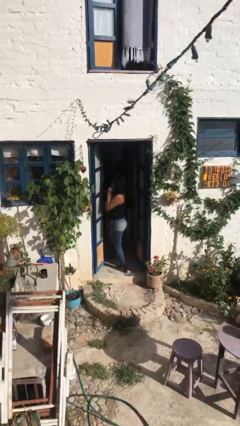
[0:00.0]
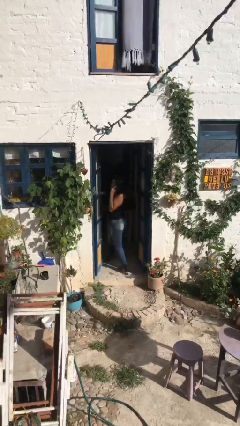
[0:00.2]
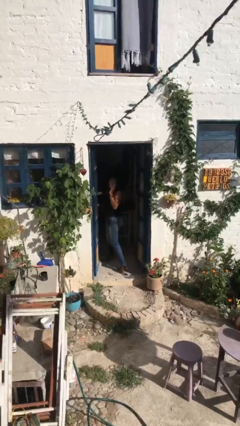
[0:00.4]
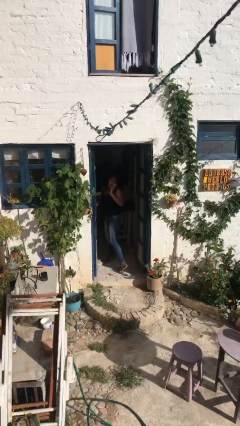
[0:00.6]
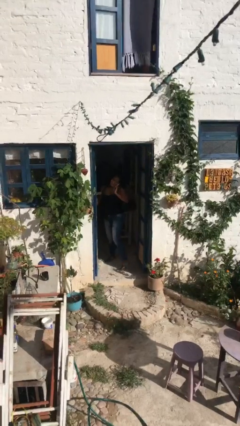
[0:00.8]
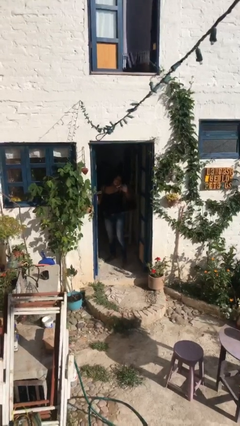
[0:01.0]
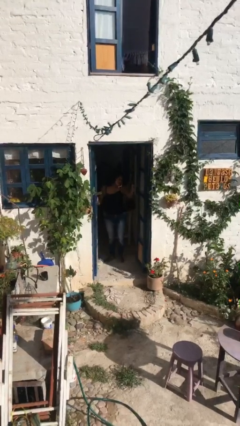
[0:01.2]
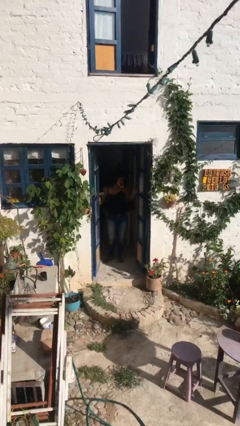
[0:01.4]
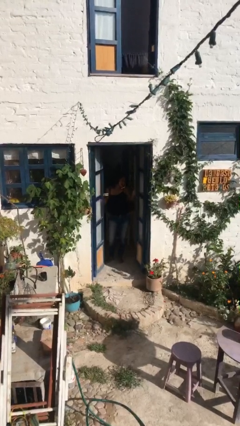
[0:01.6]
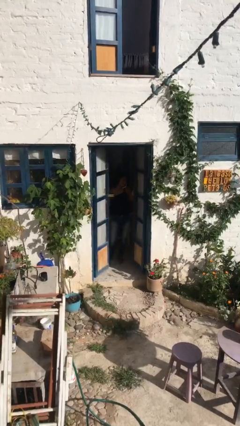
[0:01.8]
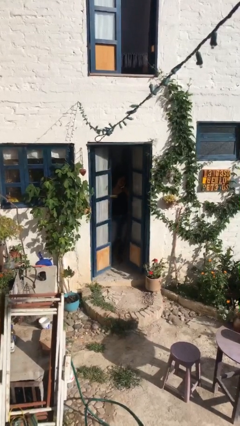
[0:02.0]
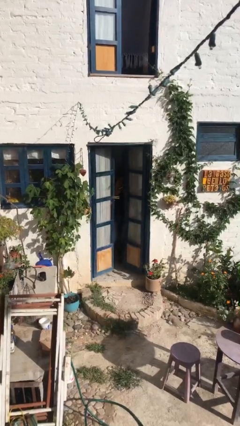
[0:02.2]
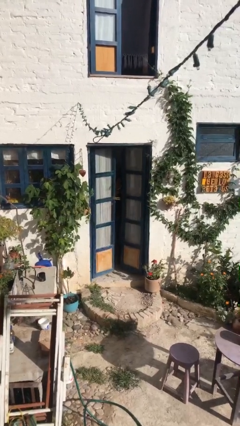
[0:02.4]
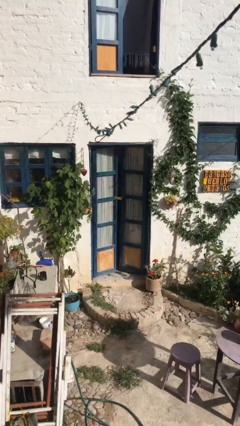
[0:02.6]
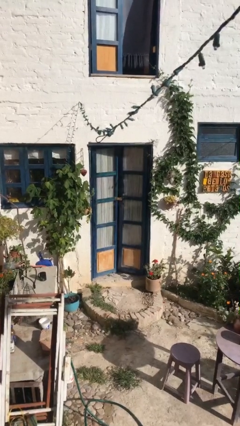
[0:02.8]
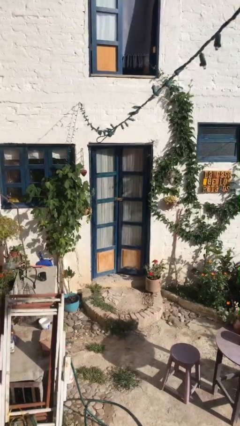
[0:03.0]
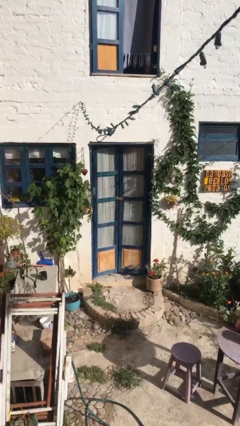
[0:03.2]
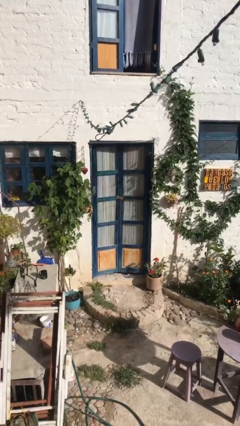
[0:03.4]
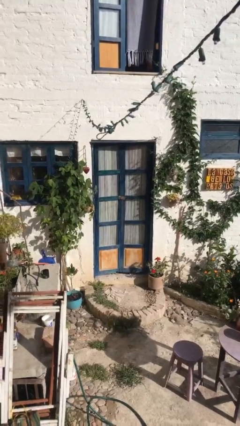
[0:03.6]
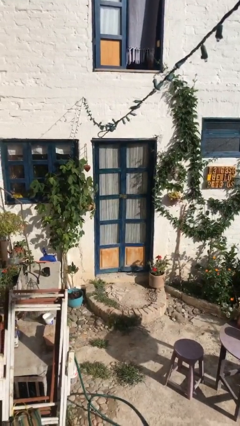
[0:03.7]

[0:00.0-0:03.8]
person closes facility door

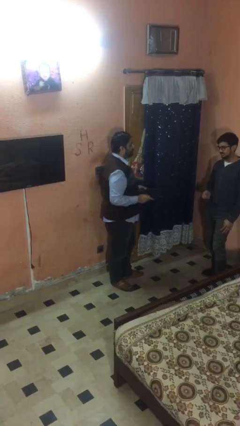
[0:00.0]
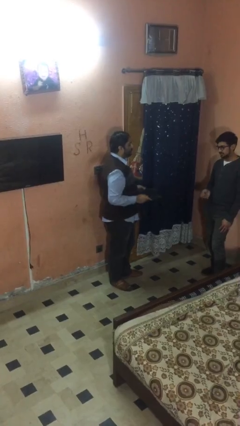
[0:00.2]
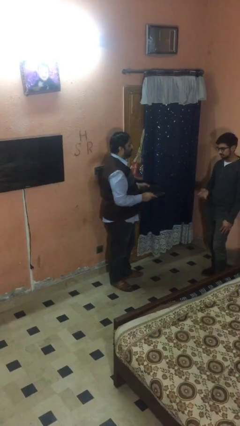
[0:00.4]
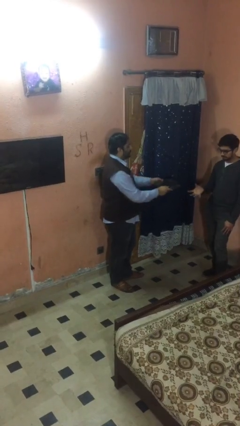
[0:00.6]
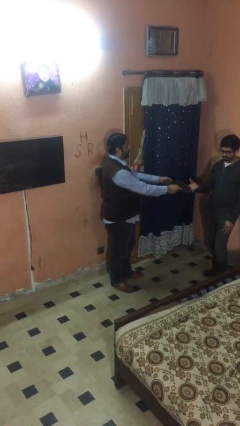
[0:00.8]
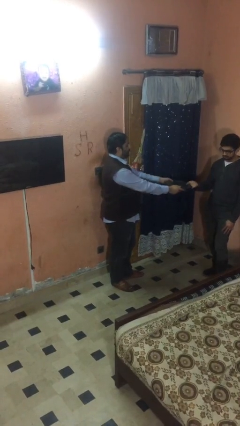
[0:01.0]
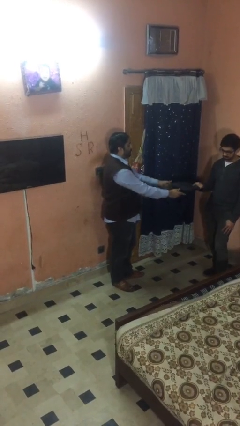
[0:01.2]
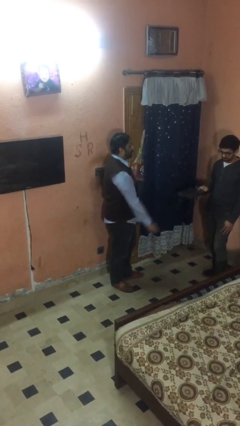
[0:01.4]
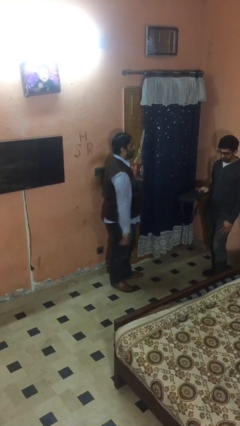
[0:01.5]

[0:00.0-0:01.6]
person transfers object to person

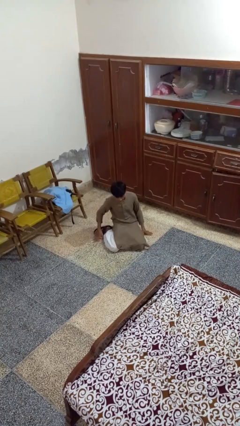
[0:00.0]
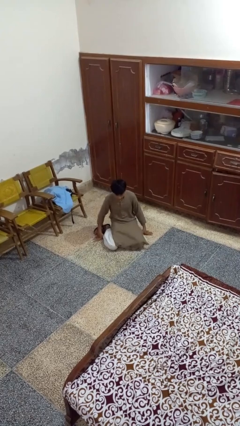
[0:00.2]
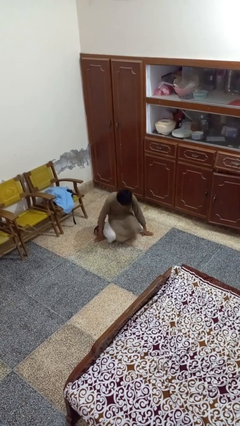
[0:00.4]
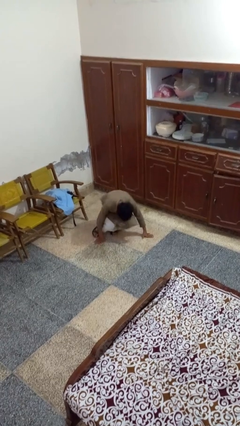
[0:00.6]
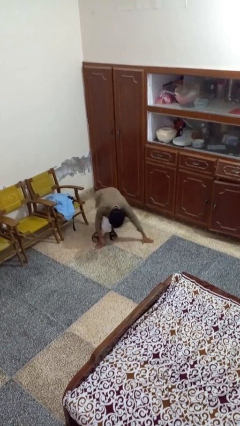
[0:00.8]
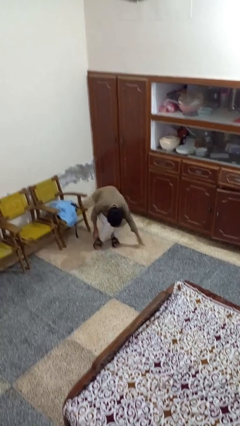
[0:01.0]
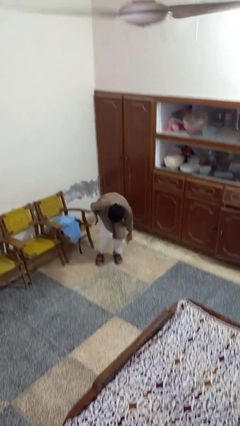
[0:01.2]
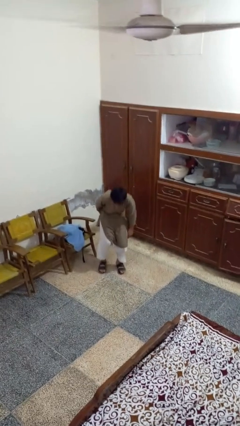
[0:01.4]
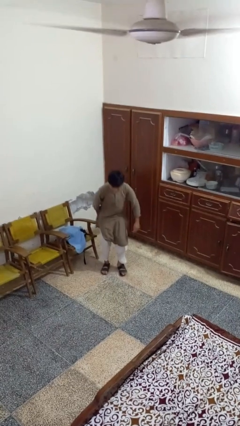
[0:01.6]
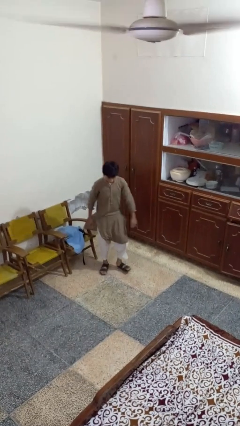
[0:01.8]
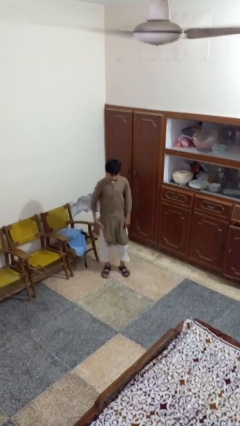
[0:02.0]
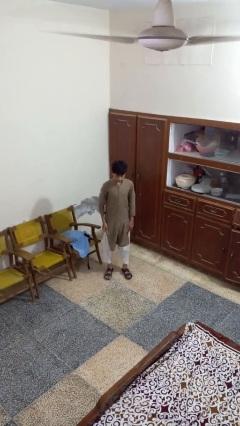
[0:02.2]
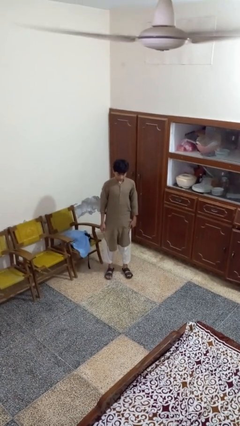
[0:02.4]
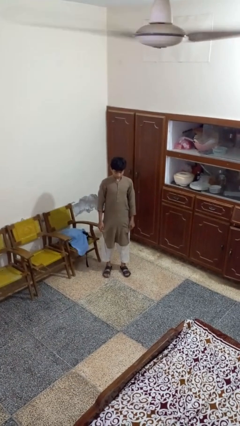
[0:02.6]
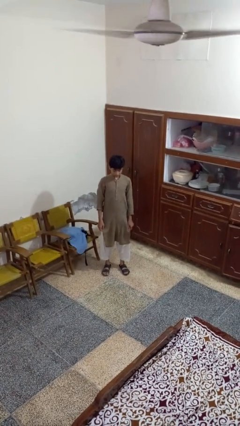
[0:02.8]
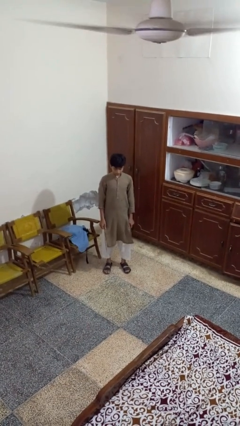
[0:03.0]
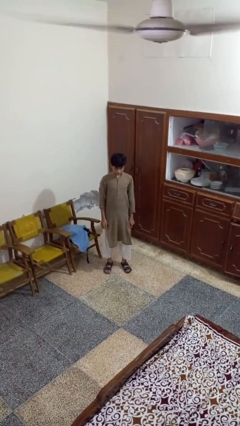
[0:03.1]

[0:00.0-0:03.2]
person stands up from floor

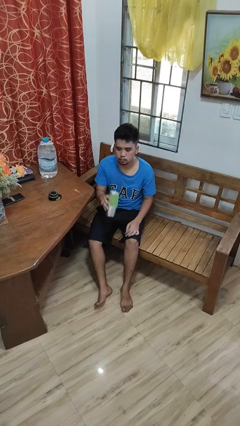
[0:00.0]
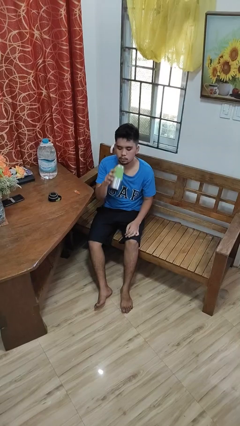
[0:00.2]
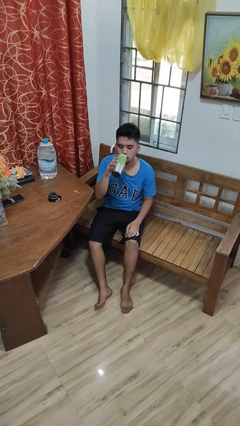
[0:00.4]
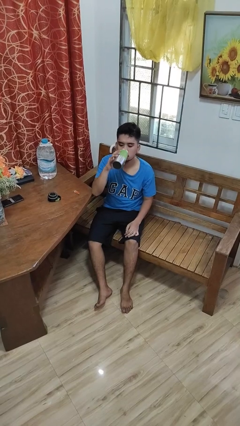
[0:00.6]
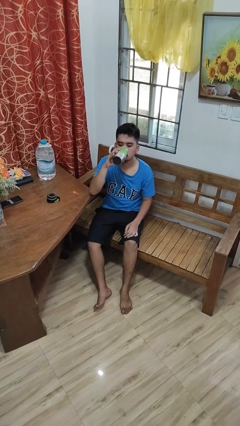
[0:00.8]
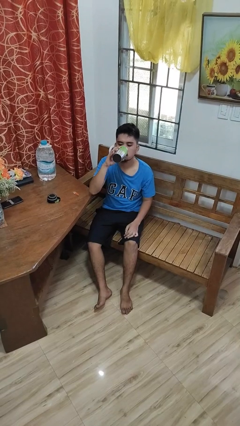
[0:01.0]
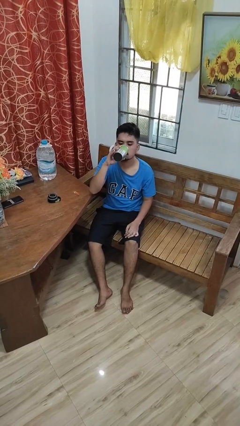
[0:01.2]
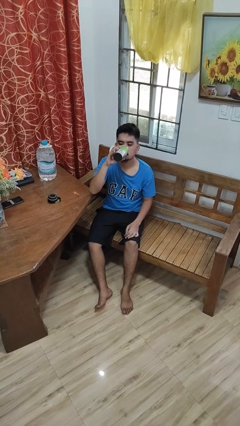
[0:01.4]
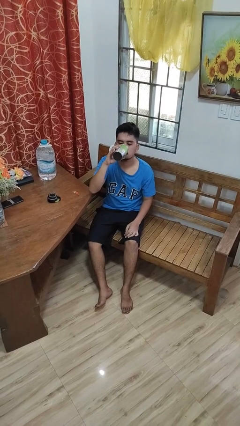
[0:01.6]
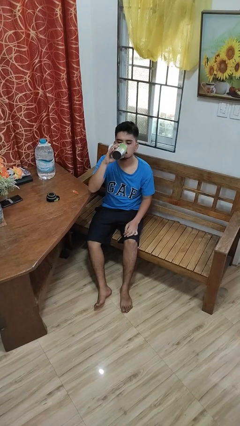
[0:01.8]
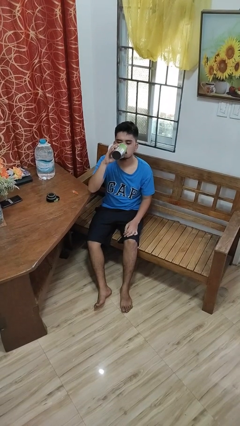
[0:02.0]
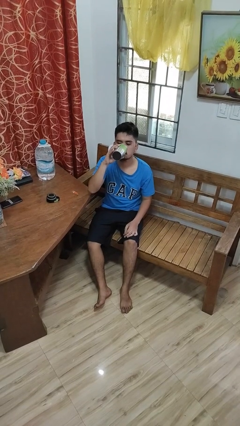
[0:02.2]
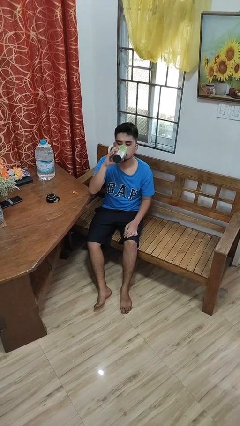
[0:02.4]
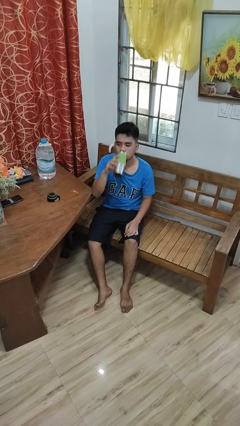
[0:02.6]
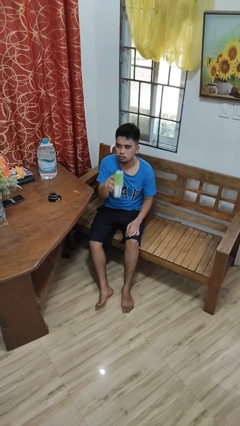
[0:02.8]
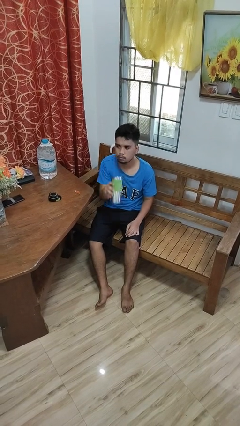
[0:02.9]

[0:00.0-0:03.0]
person drinks from bottle

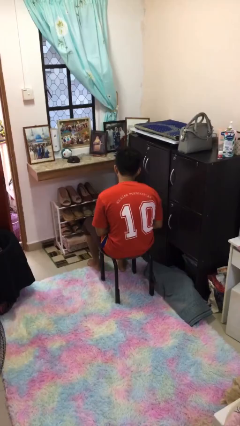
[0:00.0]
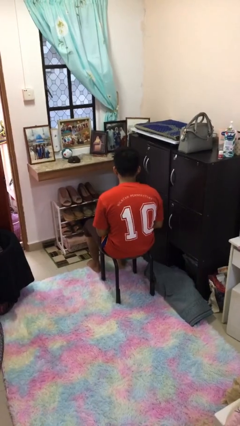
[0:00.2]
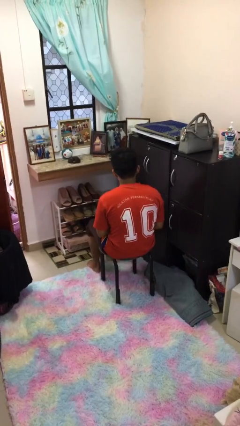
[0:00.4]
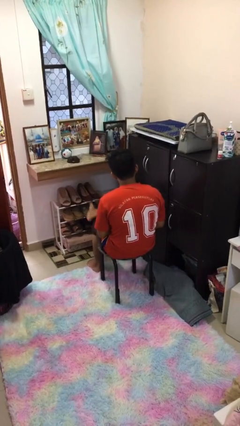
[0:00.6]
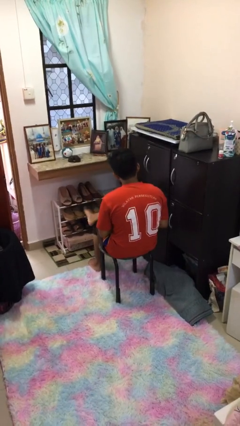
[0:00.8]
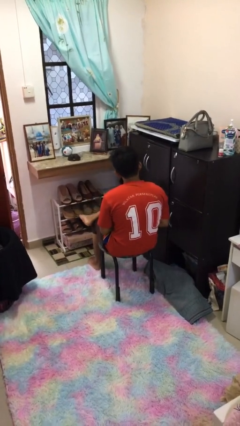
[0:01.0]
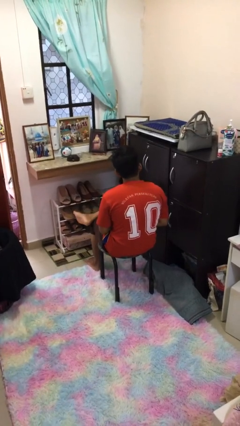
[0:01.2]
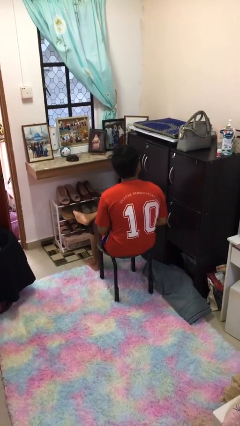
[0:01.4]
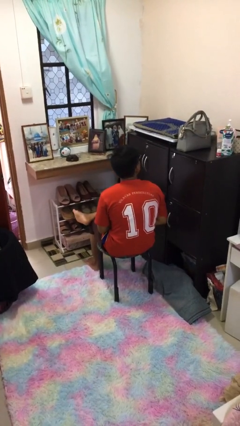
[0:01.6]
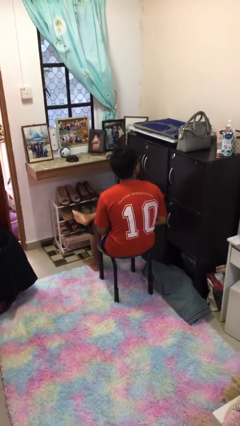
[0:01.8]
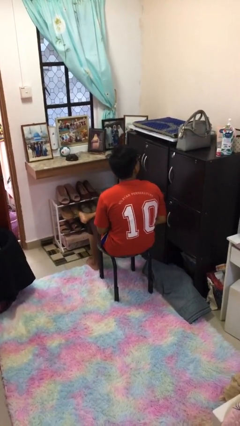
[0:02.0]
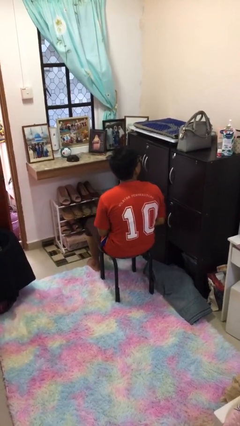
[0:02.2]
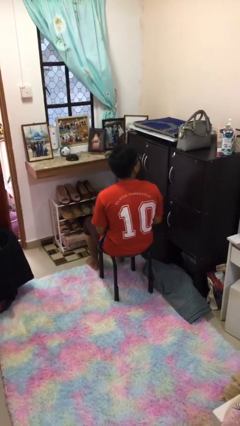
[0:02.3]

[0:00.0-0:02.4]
person crosses legs

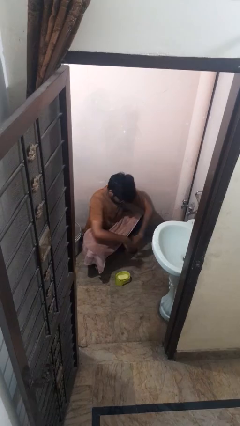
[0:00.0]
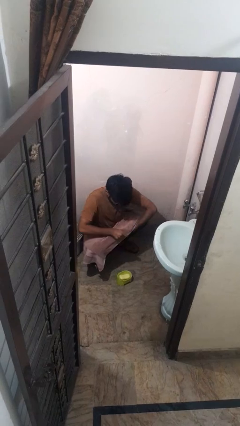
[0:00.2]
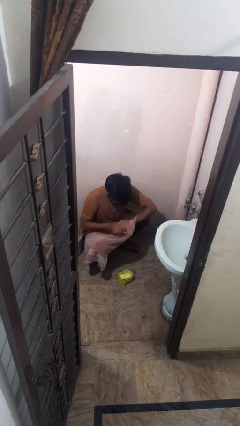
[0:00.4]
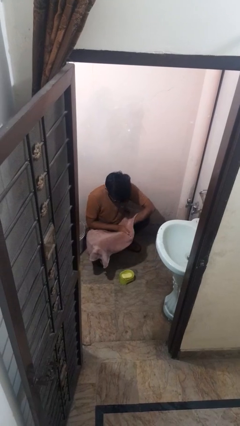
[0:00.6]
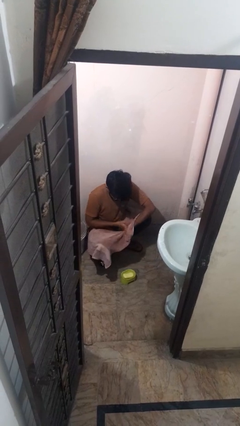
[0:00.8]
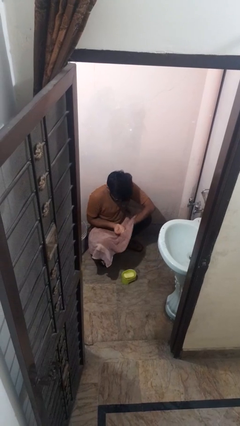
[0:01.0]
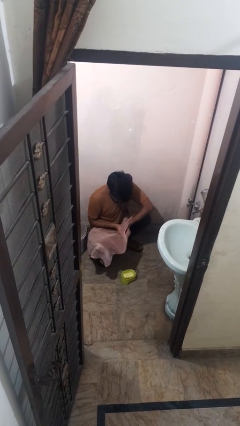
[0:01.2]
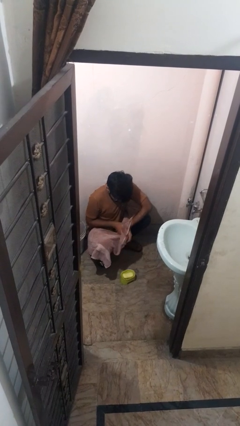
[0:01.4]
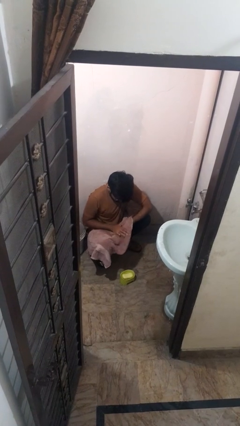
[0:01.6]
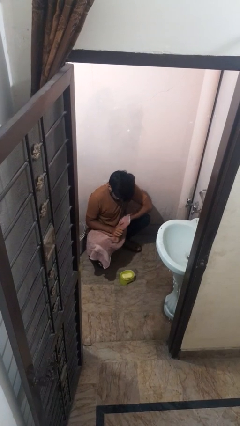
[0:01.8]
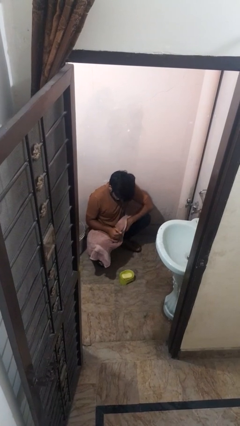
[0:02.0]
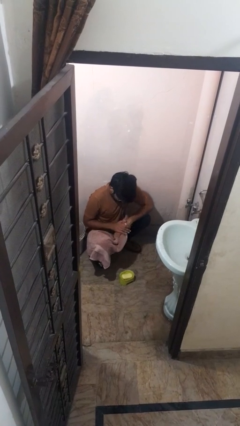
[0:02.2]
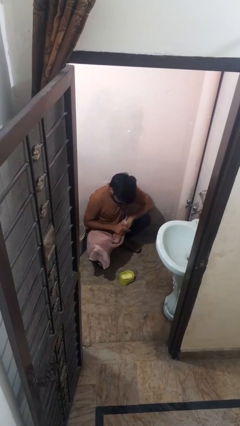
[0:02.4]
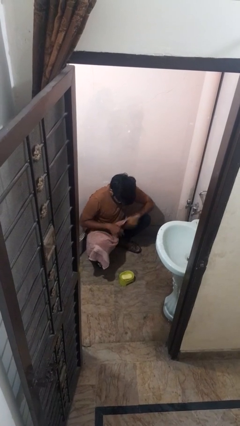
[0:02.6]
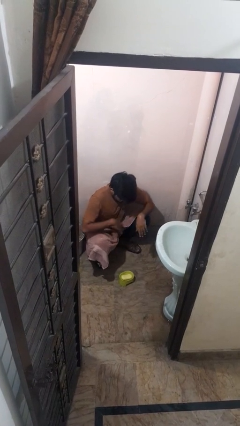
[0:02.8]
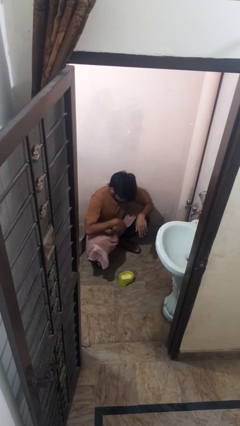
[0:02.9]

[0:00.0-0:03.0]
person dries hands with towel
